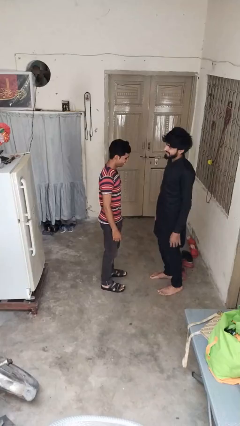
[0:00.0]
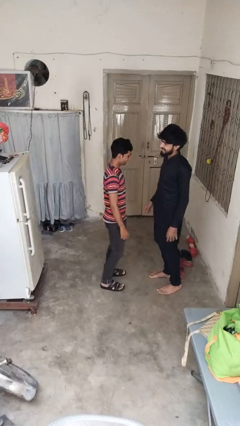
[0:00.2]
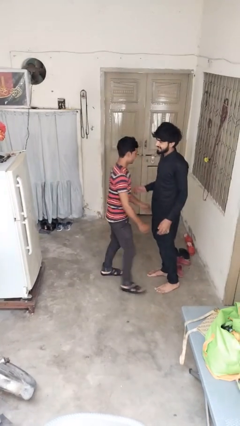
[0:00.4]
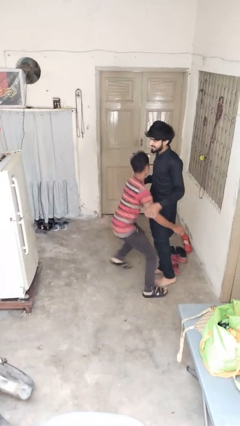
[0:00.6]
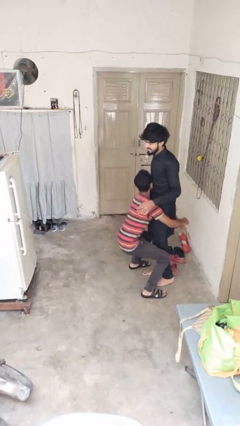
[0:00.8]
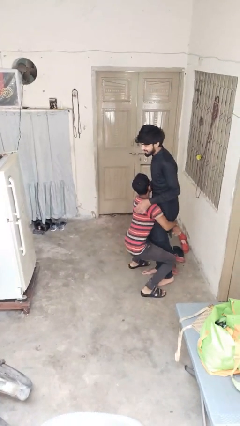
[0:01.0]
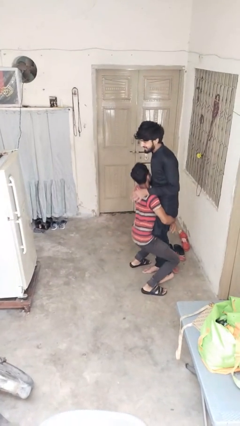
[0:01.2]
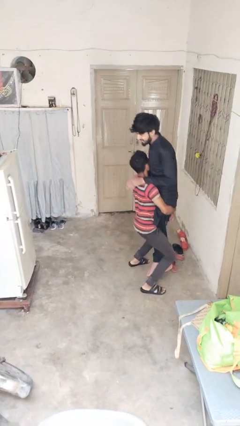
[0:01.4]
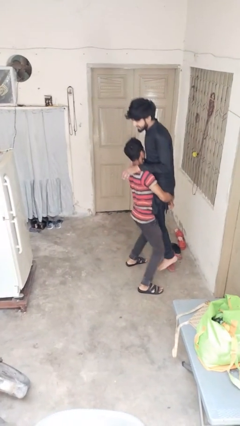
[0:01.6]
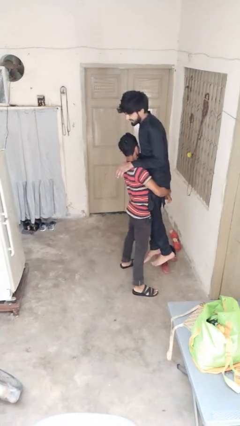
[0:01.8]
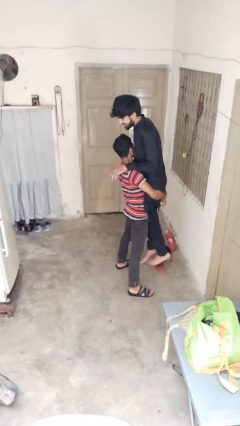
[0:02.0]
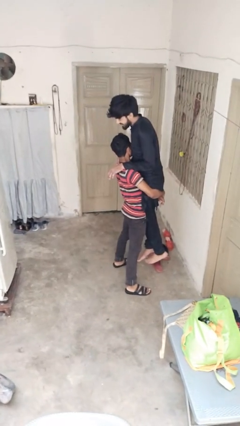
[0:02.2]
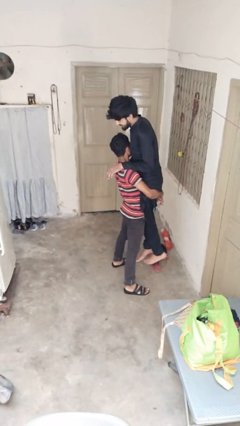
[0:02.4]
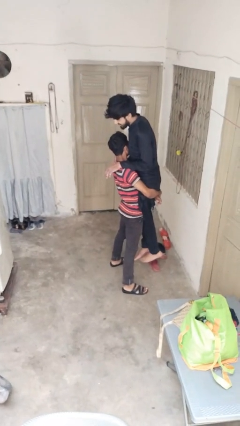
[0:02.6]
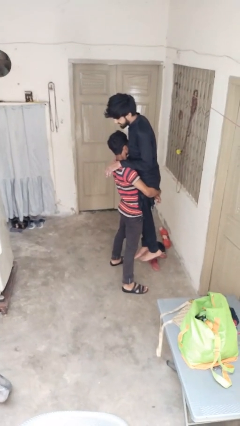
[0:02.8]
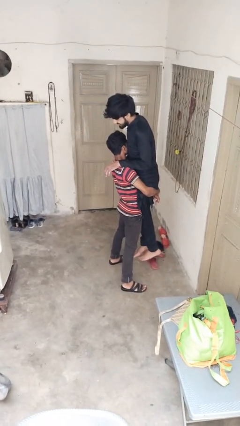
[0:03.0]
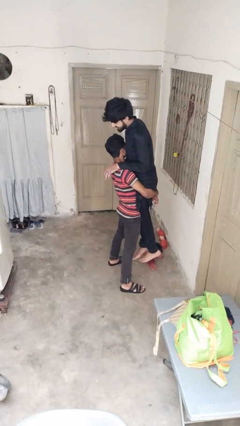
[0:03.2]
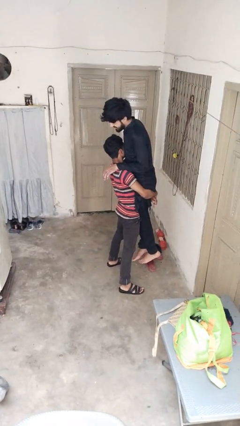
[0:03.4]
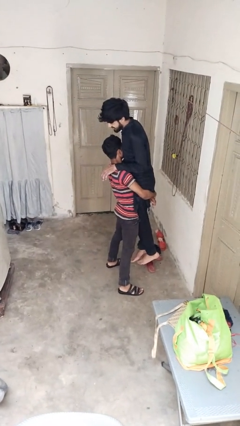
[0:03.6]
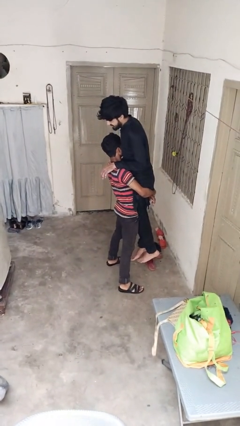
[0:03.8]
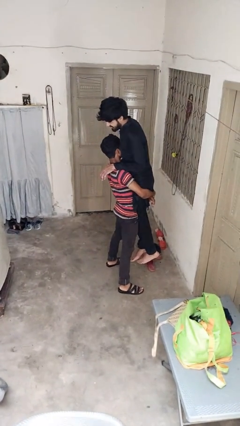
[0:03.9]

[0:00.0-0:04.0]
person picks up person

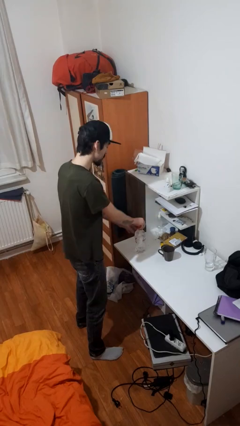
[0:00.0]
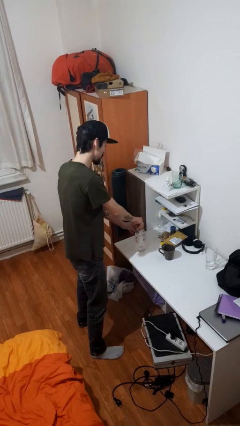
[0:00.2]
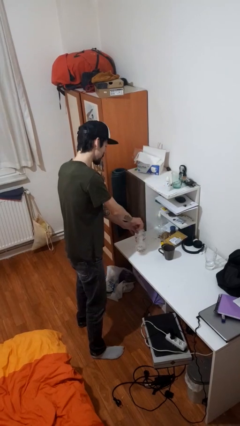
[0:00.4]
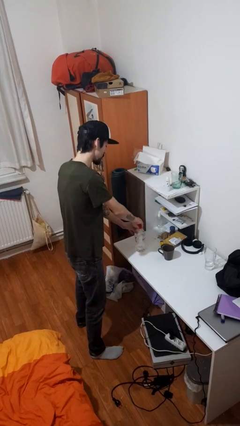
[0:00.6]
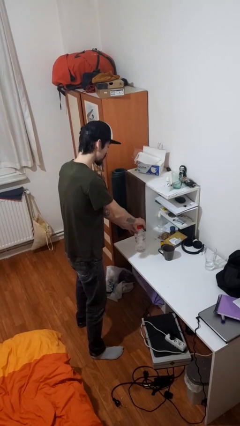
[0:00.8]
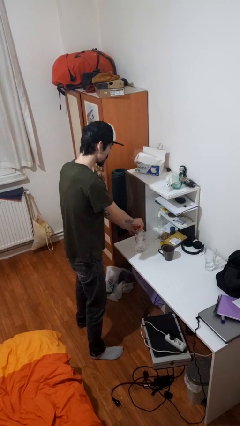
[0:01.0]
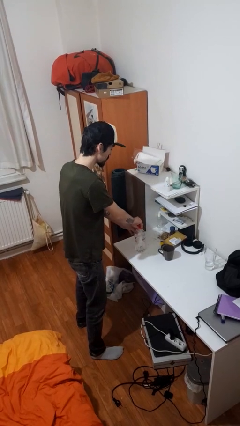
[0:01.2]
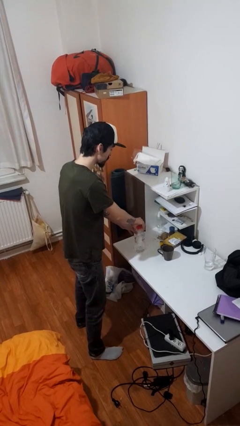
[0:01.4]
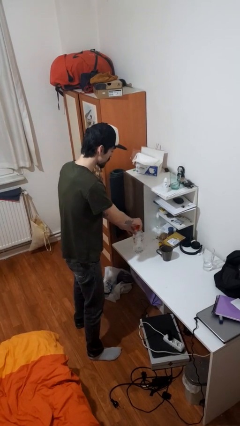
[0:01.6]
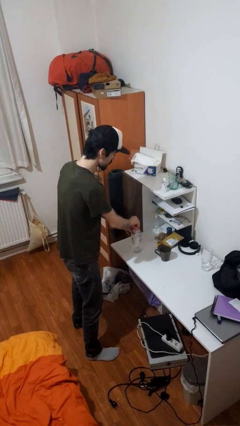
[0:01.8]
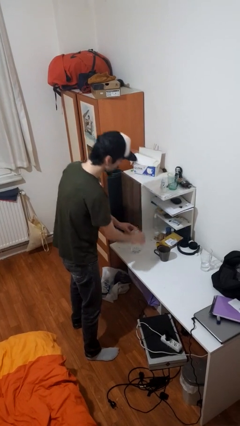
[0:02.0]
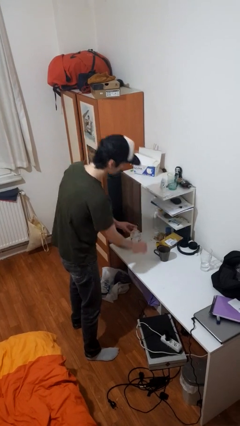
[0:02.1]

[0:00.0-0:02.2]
person unscrews lid from bottle

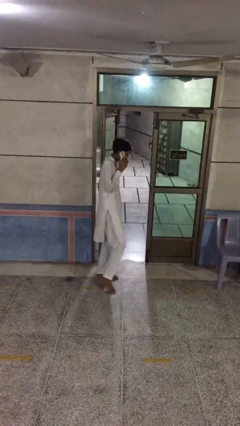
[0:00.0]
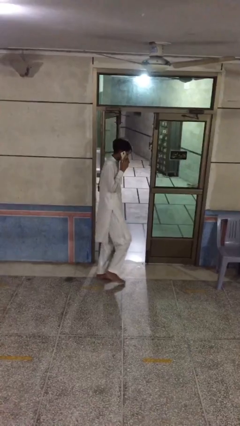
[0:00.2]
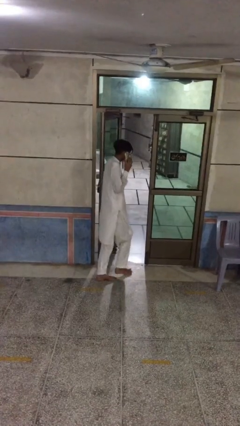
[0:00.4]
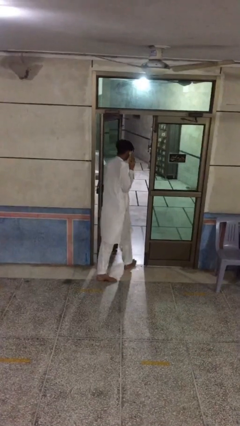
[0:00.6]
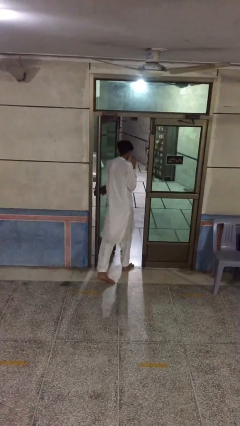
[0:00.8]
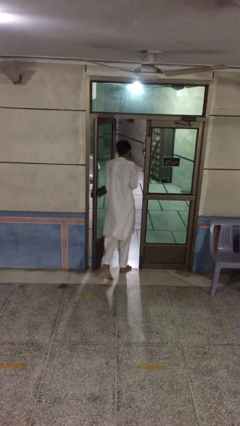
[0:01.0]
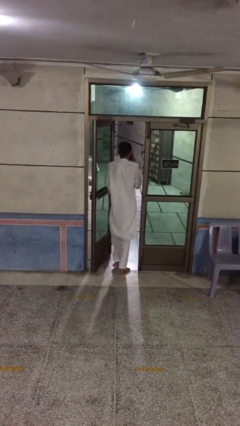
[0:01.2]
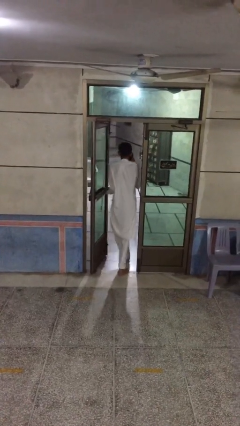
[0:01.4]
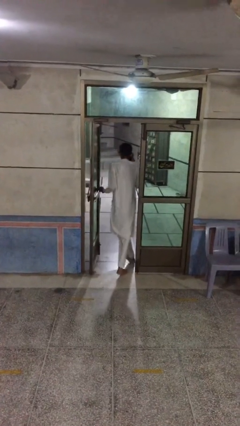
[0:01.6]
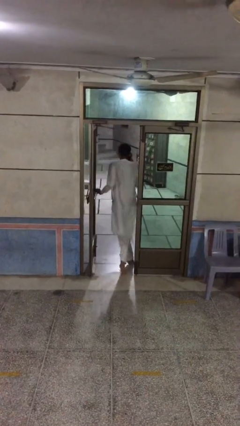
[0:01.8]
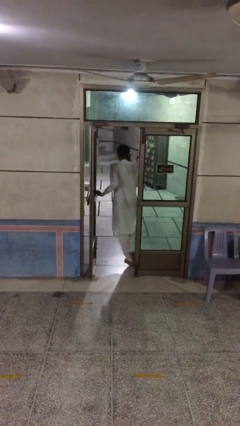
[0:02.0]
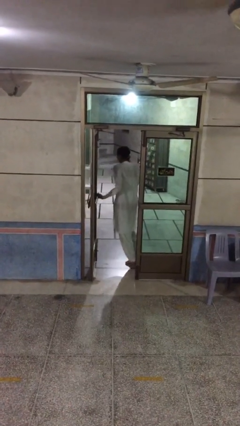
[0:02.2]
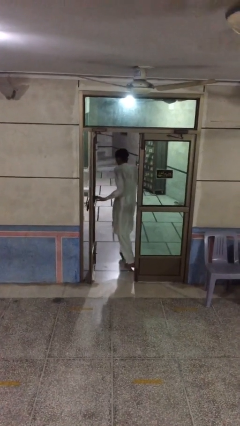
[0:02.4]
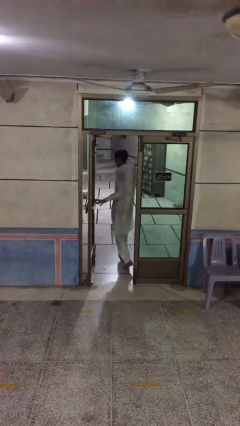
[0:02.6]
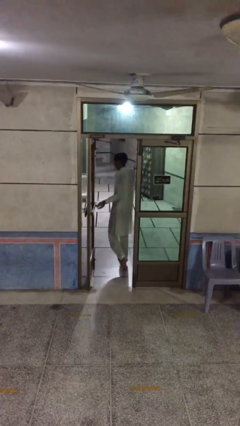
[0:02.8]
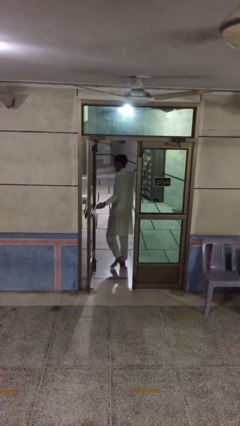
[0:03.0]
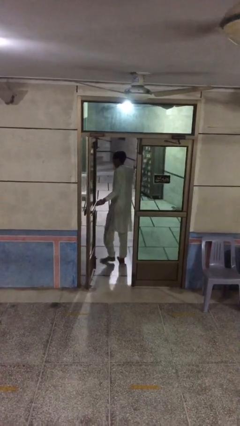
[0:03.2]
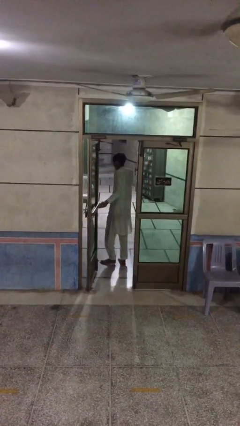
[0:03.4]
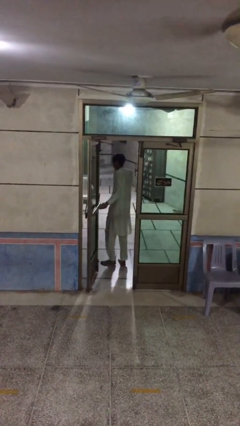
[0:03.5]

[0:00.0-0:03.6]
person exits scene through structure

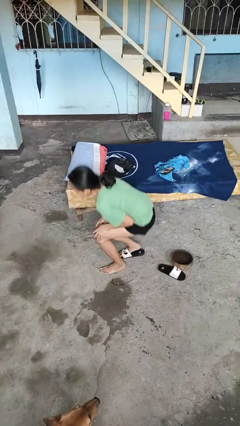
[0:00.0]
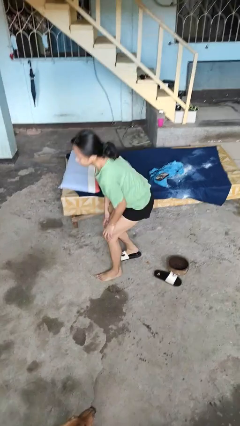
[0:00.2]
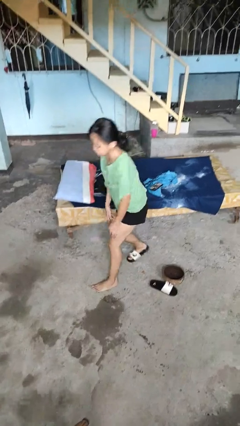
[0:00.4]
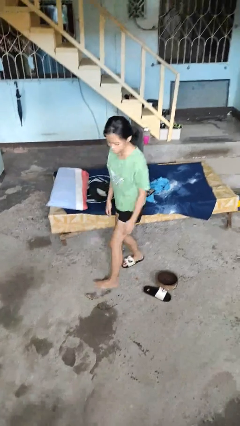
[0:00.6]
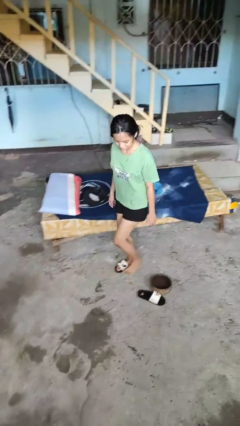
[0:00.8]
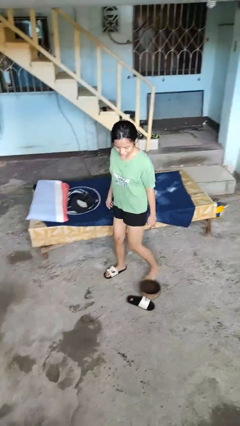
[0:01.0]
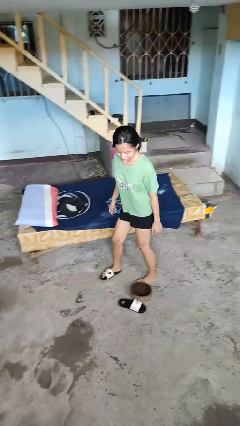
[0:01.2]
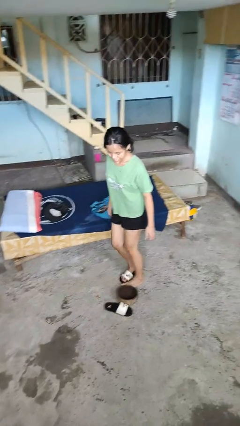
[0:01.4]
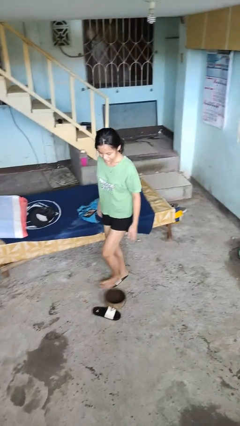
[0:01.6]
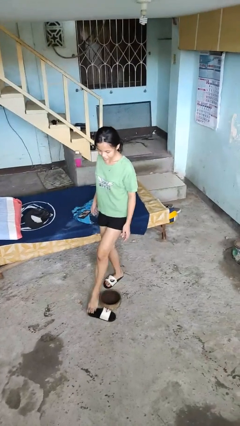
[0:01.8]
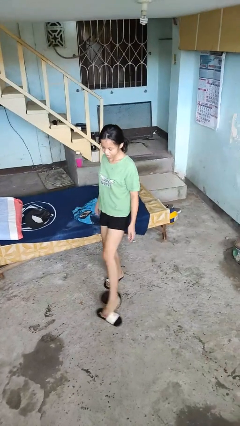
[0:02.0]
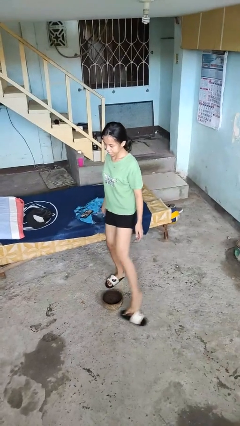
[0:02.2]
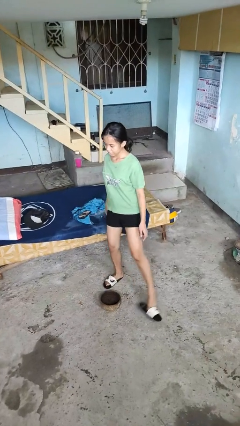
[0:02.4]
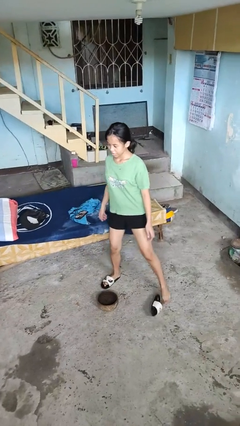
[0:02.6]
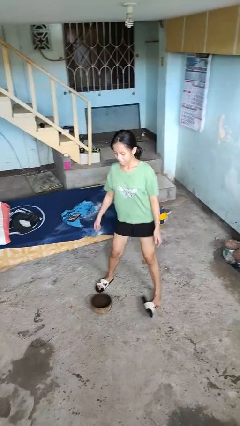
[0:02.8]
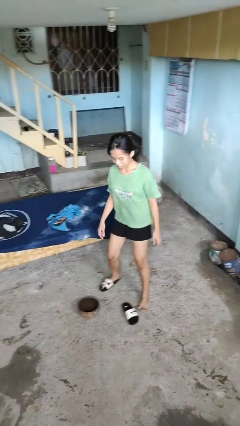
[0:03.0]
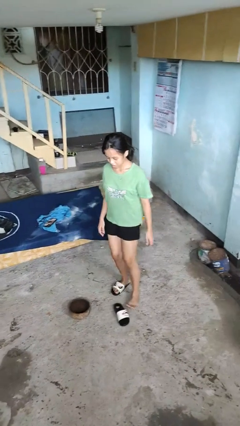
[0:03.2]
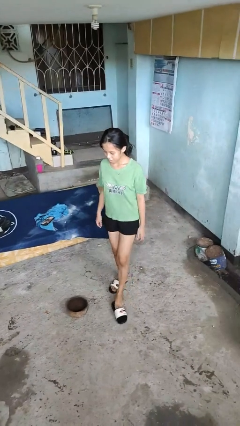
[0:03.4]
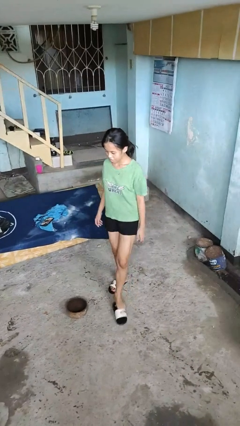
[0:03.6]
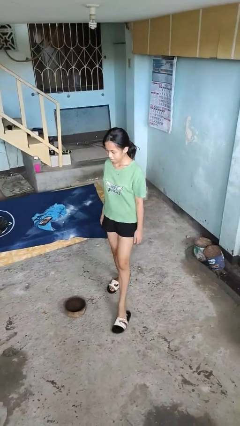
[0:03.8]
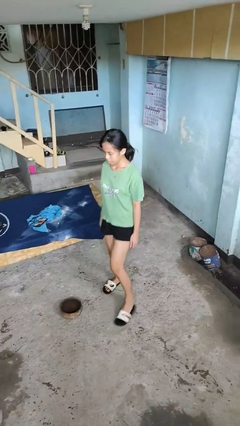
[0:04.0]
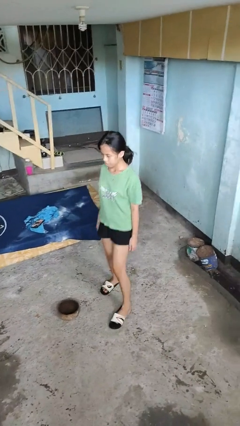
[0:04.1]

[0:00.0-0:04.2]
person stands up from floor

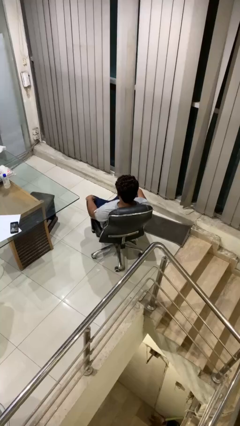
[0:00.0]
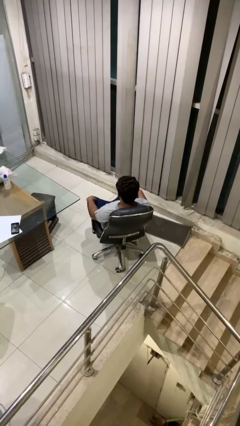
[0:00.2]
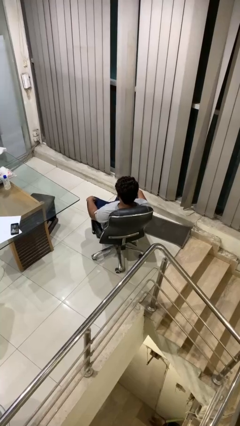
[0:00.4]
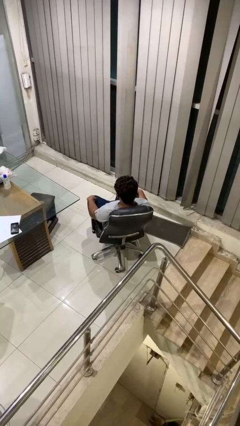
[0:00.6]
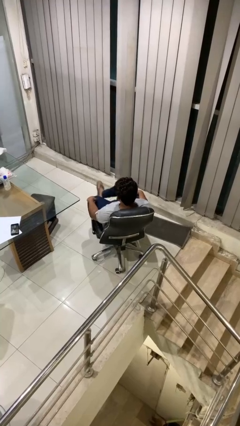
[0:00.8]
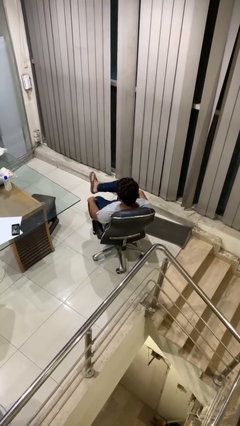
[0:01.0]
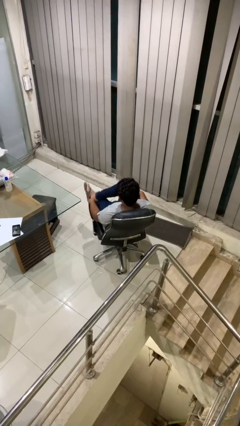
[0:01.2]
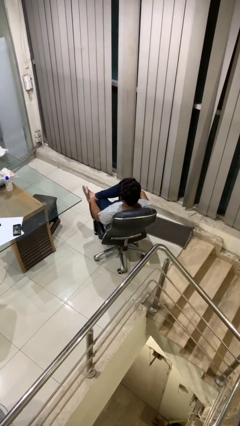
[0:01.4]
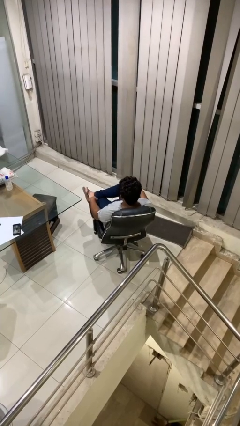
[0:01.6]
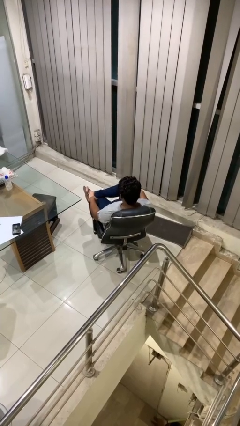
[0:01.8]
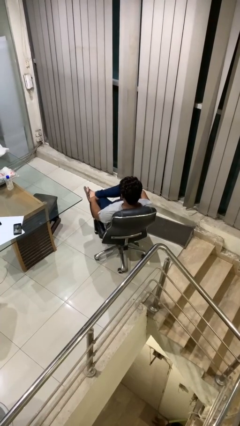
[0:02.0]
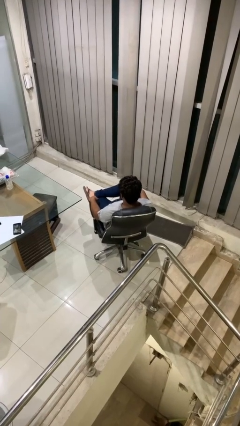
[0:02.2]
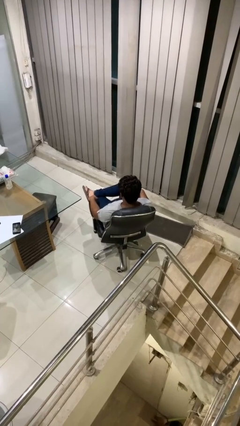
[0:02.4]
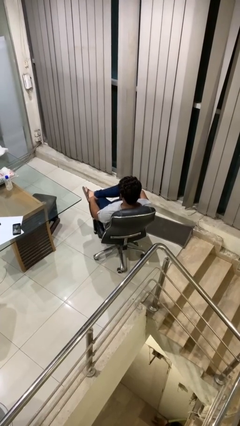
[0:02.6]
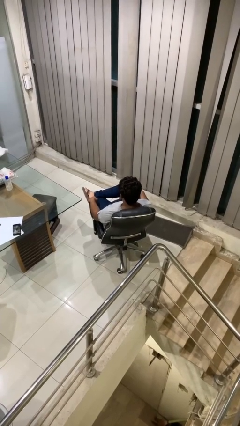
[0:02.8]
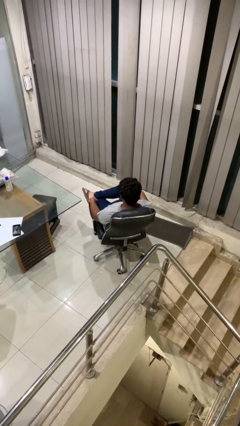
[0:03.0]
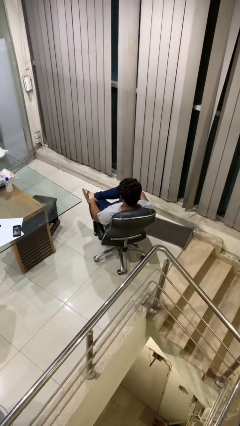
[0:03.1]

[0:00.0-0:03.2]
person crosses legs
